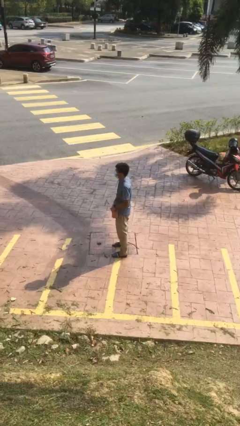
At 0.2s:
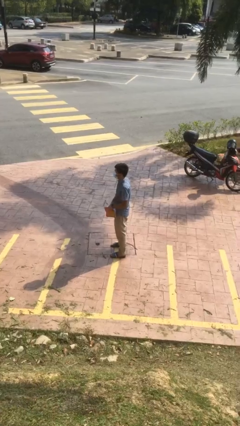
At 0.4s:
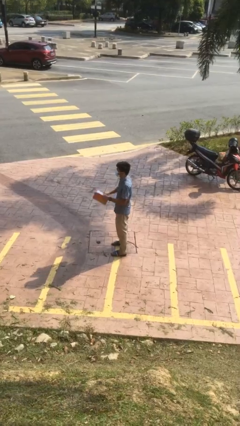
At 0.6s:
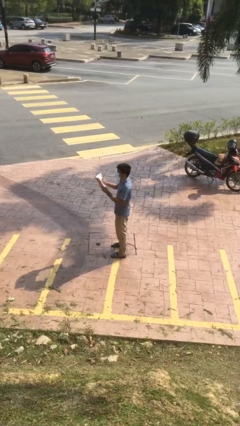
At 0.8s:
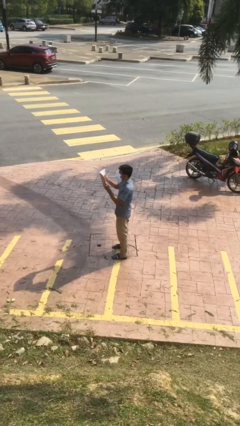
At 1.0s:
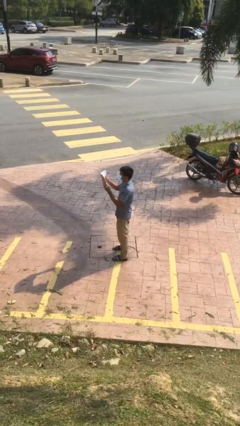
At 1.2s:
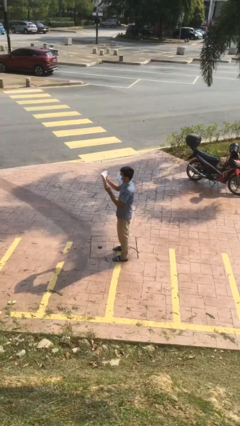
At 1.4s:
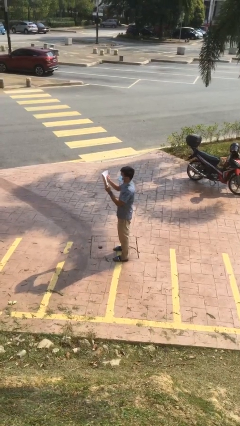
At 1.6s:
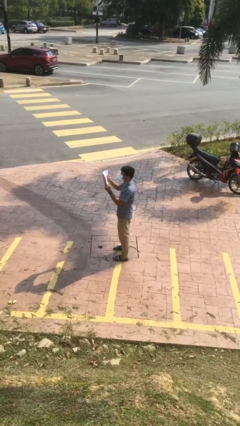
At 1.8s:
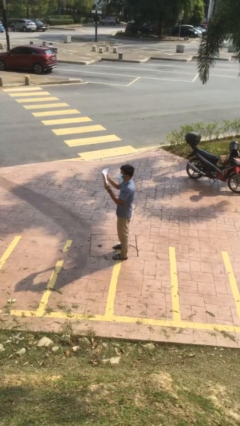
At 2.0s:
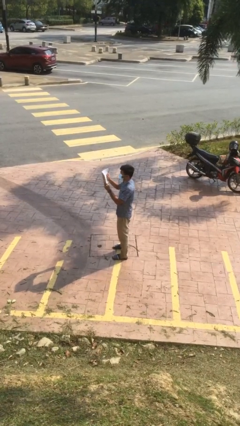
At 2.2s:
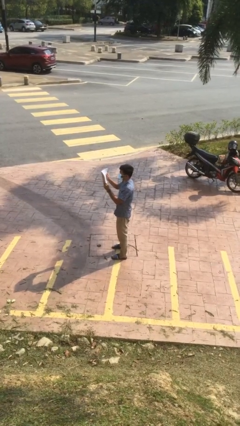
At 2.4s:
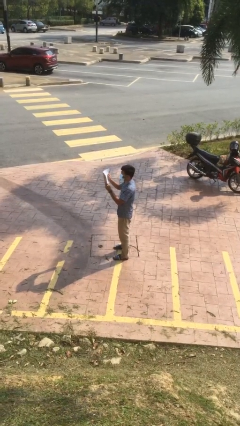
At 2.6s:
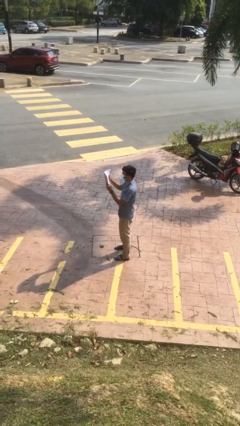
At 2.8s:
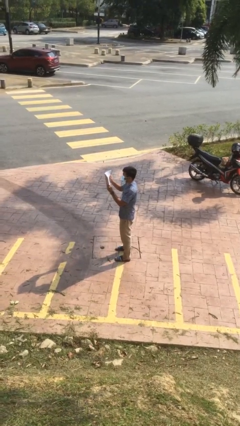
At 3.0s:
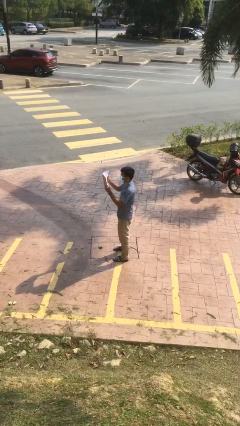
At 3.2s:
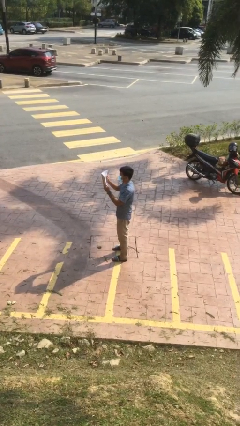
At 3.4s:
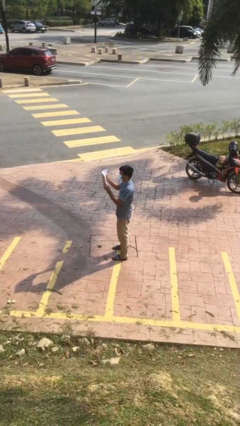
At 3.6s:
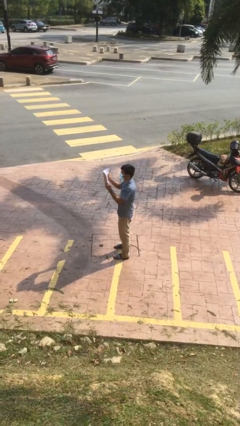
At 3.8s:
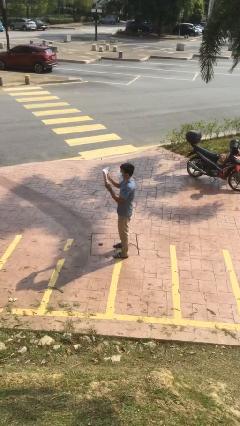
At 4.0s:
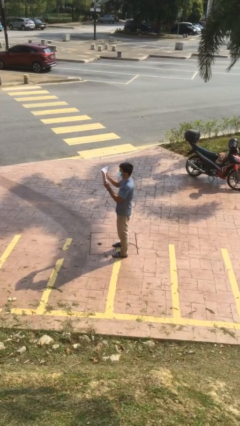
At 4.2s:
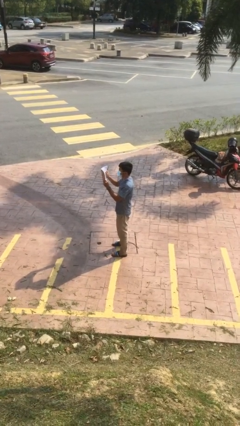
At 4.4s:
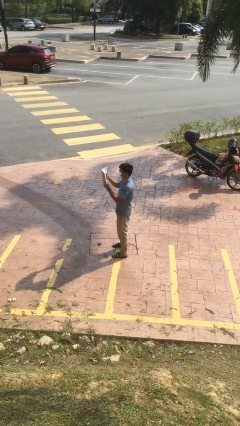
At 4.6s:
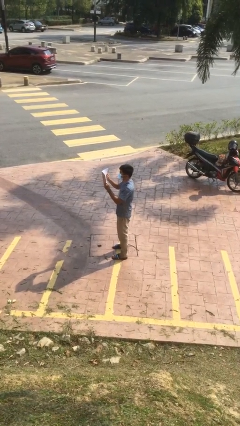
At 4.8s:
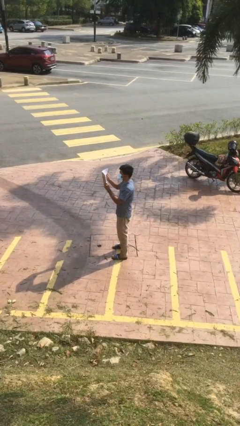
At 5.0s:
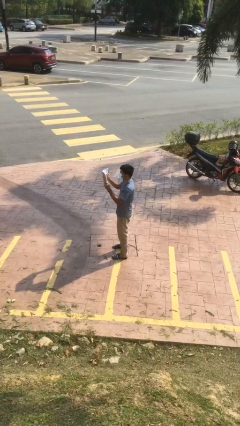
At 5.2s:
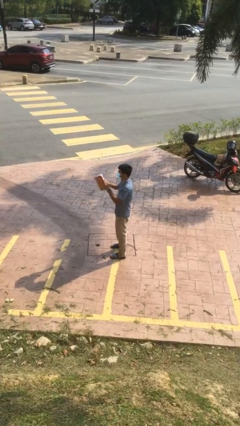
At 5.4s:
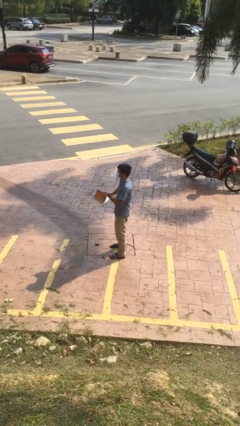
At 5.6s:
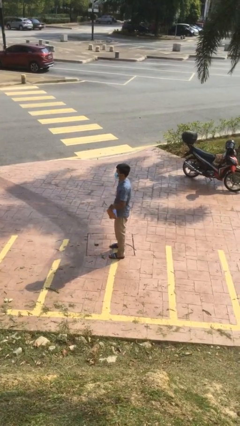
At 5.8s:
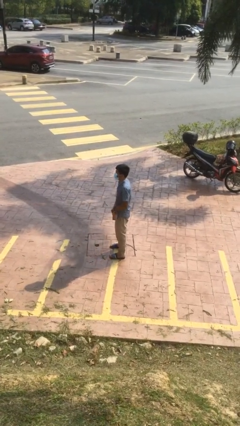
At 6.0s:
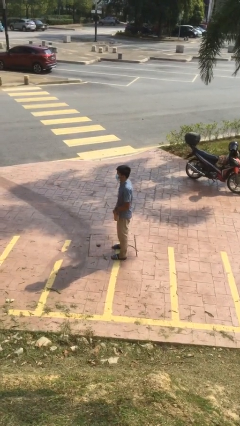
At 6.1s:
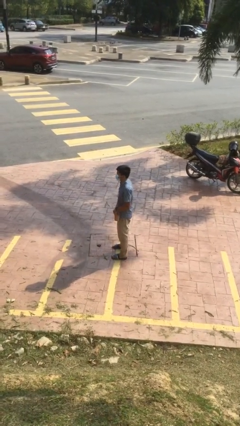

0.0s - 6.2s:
person reads document

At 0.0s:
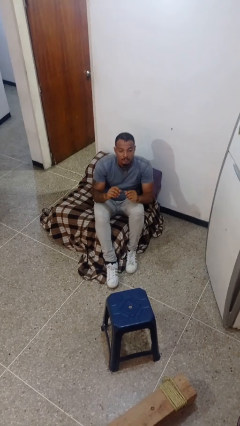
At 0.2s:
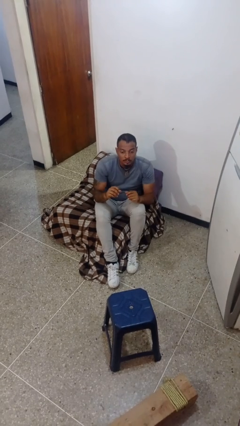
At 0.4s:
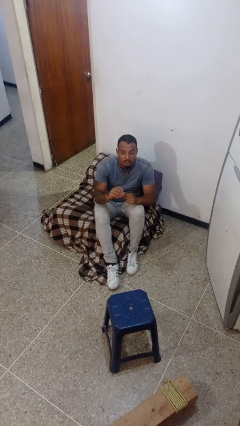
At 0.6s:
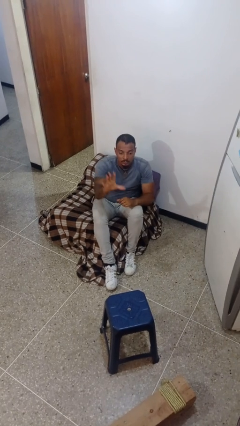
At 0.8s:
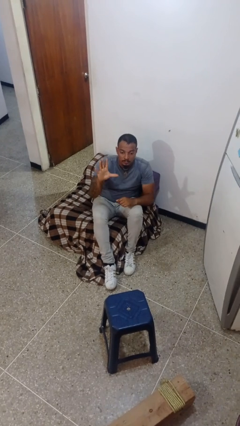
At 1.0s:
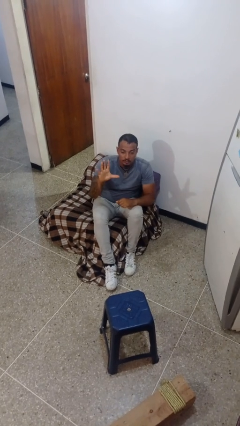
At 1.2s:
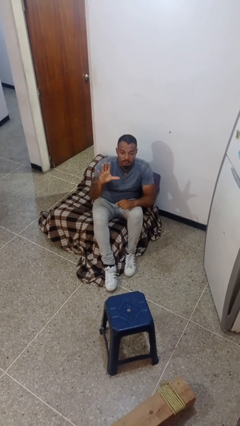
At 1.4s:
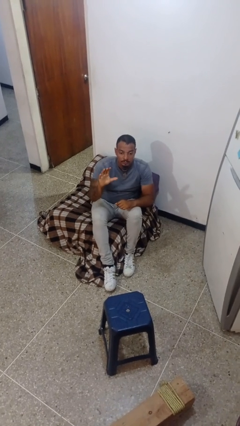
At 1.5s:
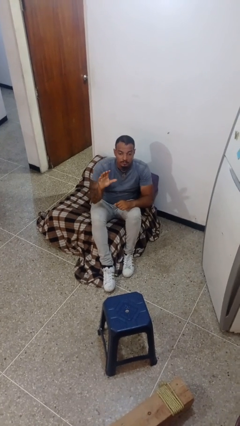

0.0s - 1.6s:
person gestures zoom in

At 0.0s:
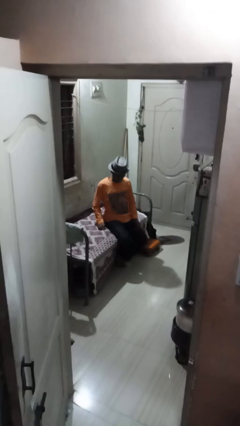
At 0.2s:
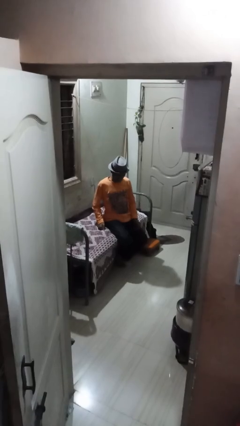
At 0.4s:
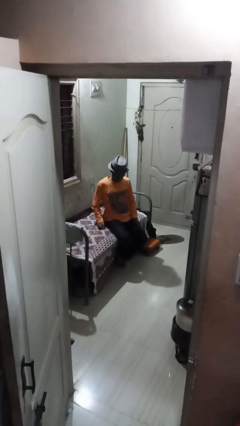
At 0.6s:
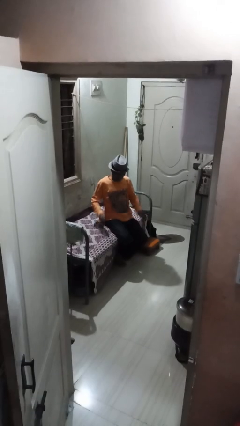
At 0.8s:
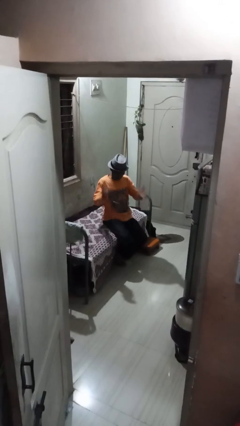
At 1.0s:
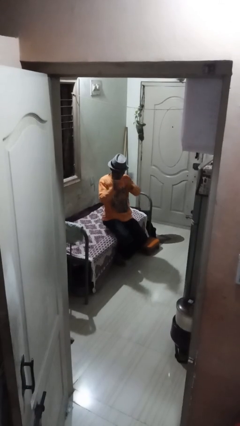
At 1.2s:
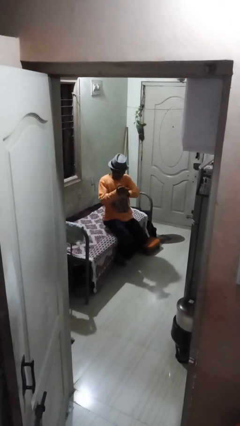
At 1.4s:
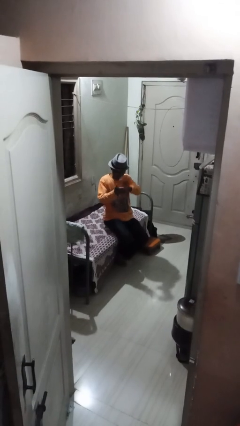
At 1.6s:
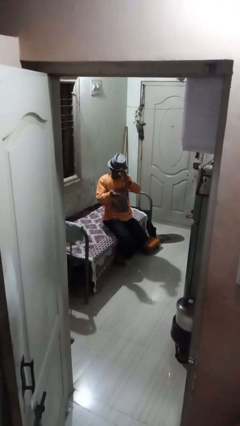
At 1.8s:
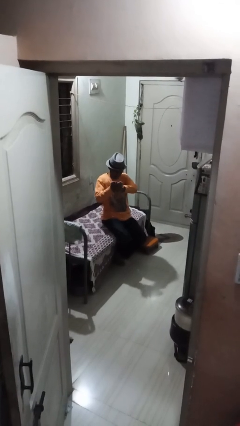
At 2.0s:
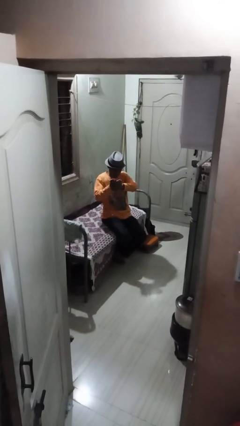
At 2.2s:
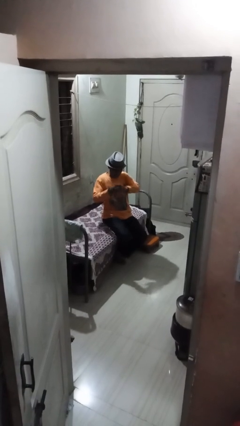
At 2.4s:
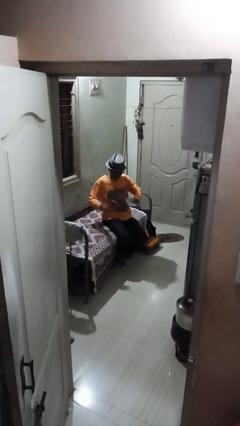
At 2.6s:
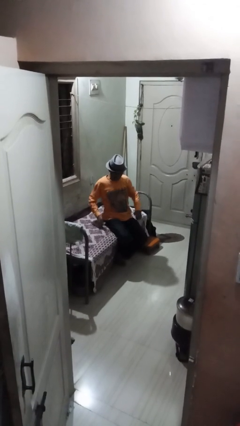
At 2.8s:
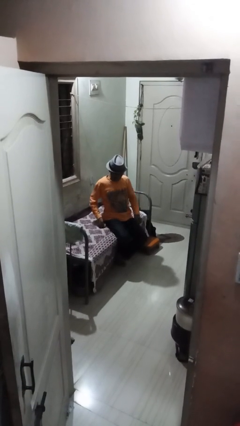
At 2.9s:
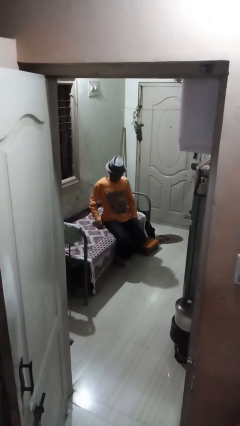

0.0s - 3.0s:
person claps hands

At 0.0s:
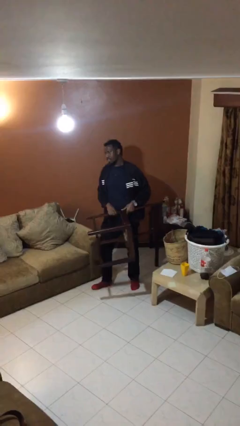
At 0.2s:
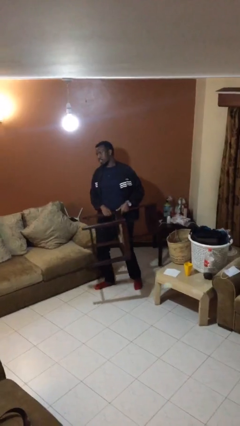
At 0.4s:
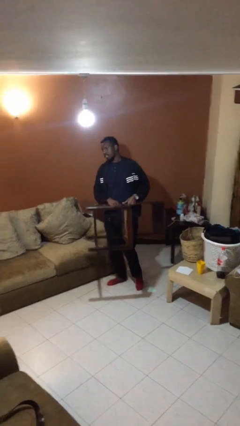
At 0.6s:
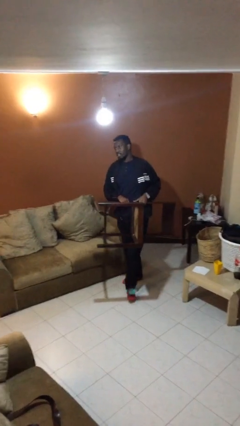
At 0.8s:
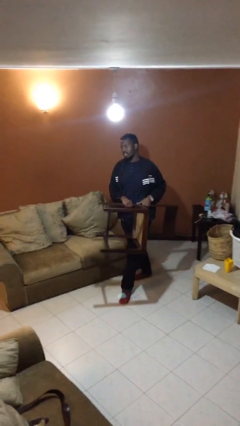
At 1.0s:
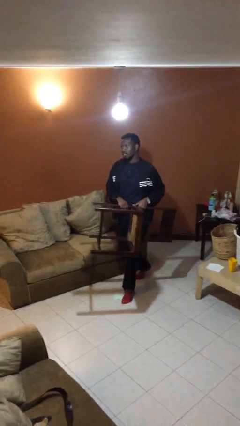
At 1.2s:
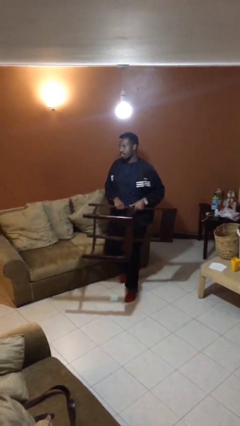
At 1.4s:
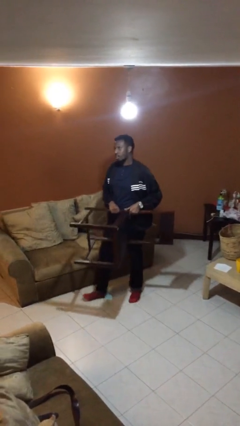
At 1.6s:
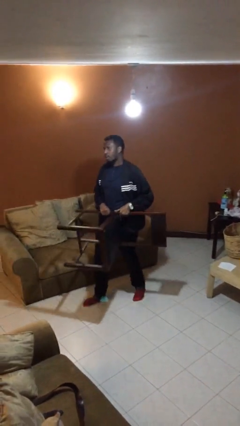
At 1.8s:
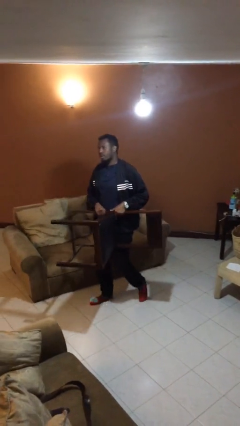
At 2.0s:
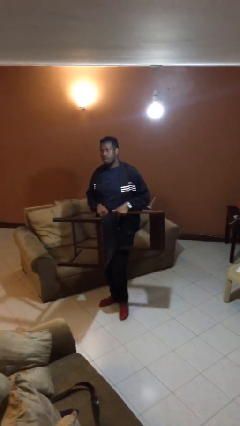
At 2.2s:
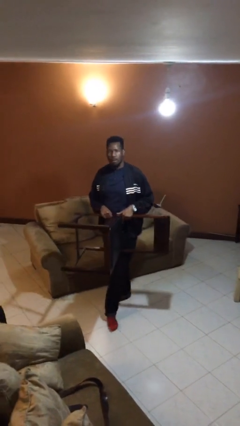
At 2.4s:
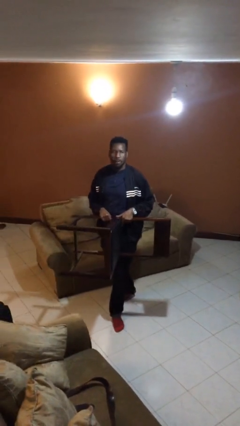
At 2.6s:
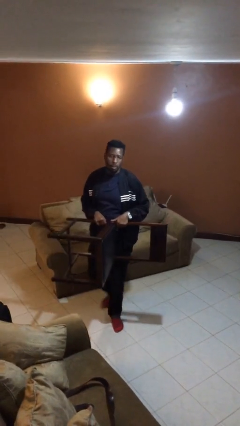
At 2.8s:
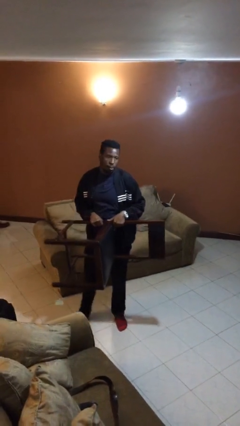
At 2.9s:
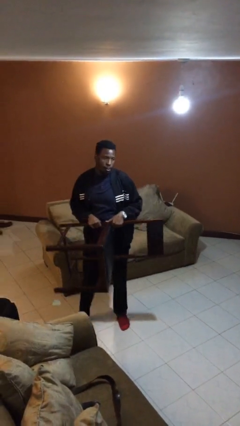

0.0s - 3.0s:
person carries furniture

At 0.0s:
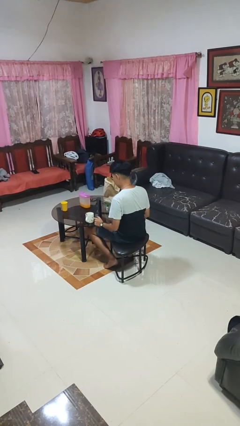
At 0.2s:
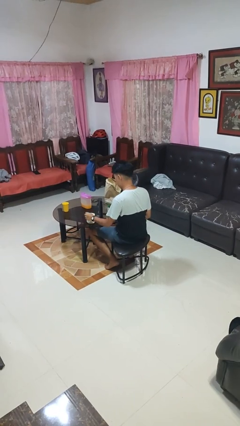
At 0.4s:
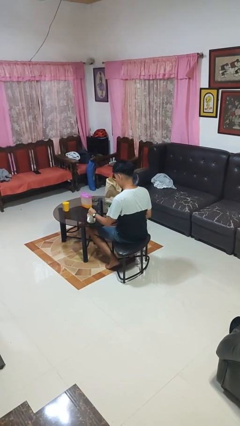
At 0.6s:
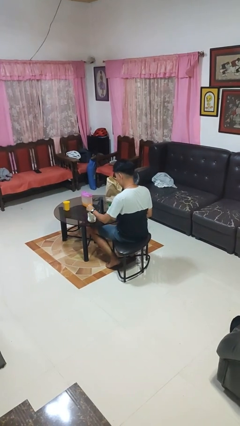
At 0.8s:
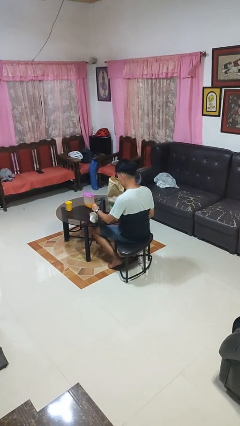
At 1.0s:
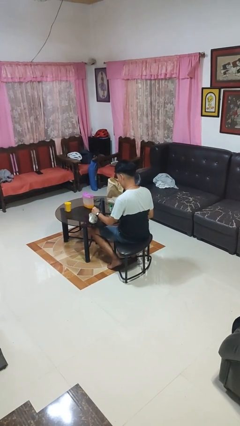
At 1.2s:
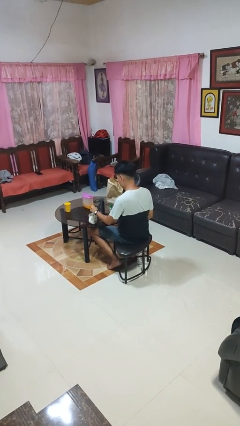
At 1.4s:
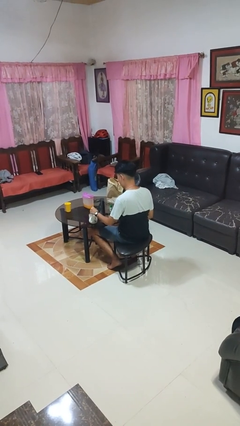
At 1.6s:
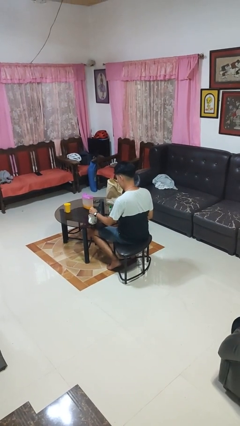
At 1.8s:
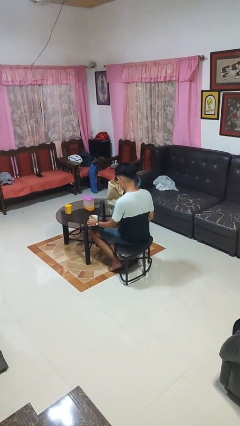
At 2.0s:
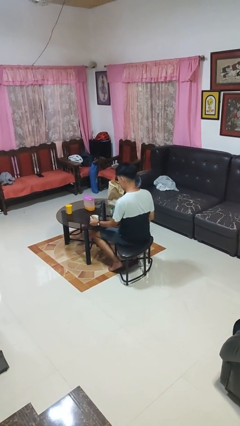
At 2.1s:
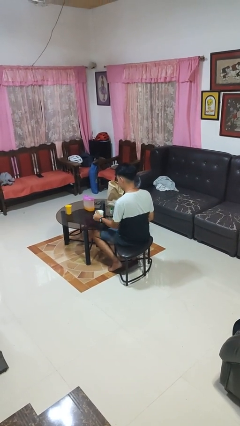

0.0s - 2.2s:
person stirs mug

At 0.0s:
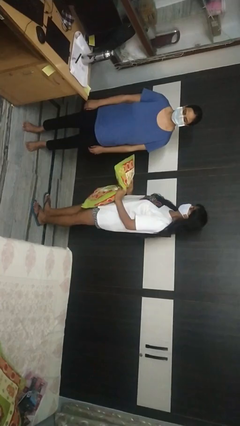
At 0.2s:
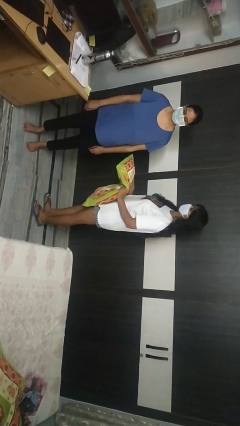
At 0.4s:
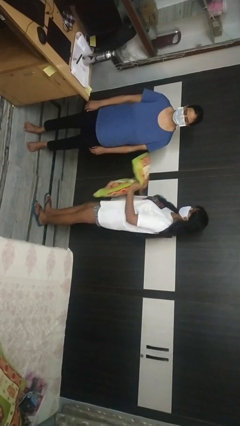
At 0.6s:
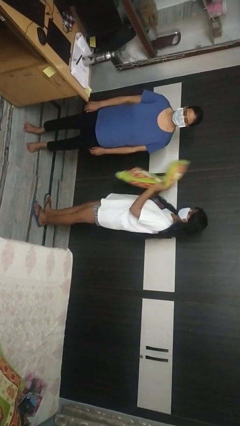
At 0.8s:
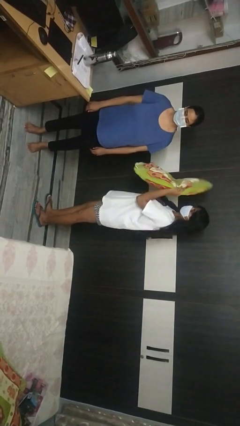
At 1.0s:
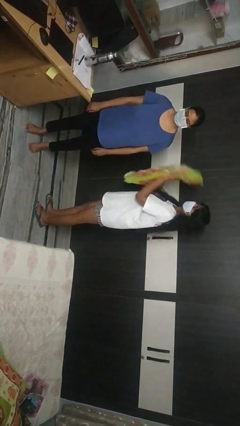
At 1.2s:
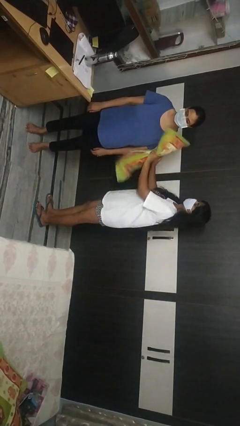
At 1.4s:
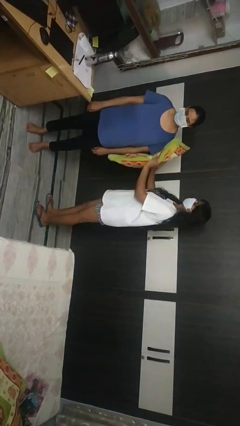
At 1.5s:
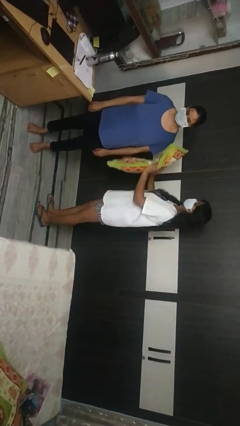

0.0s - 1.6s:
person hits person with pillow

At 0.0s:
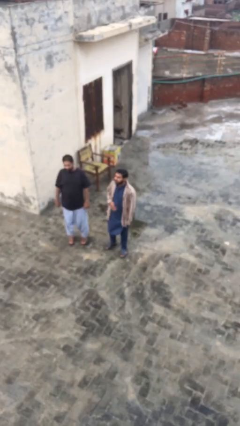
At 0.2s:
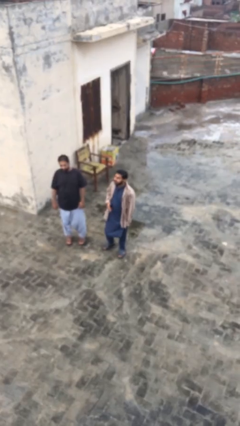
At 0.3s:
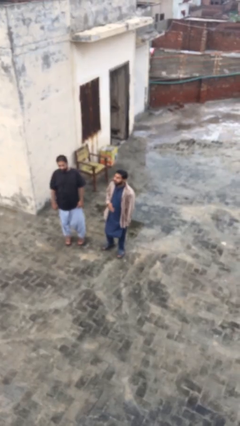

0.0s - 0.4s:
person talks to person
